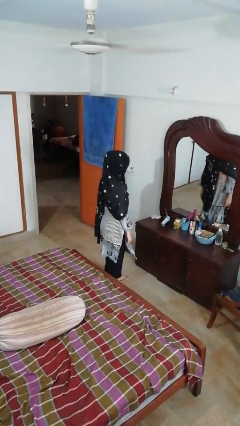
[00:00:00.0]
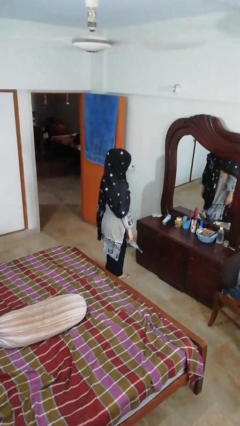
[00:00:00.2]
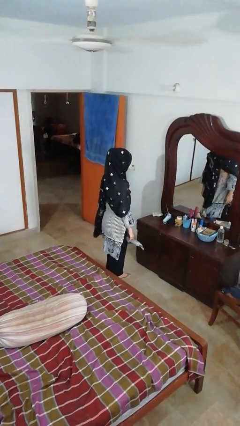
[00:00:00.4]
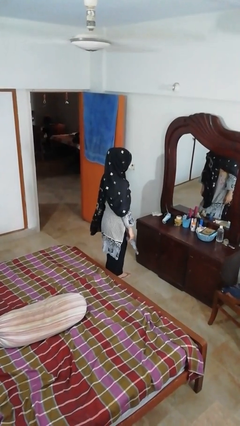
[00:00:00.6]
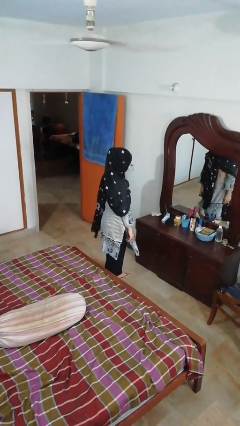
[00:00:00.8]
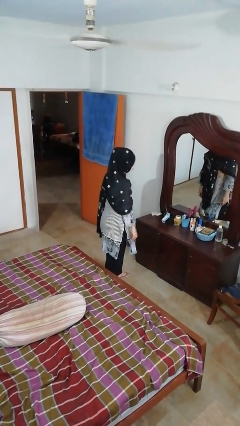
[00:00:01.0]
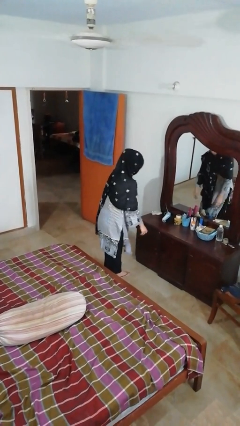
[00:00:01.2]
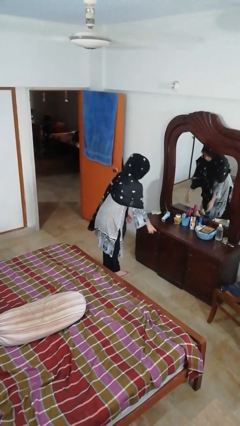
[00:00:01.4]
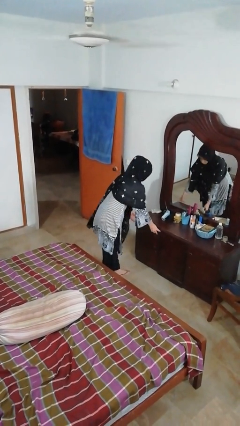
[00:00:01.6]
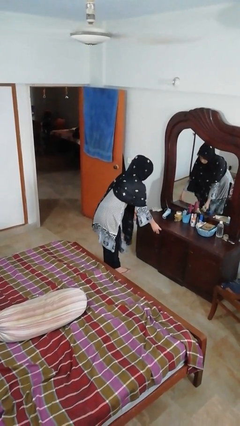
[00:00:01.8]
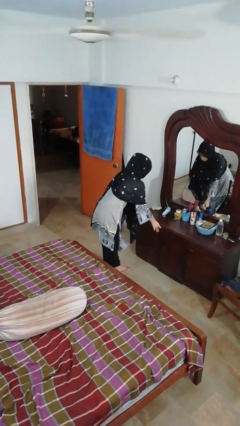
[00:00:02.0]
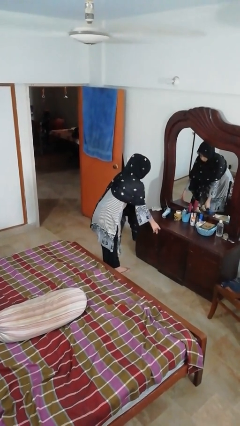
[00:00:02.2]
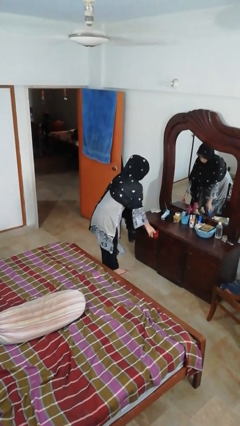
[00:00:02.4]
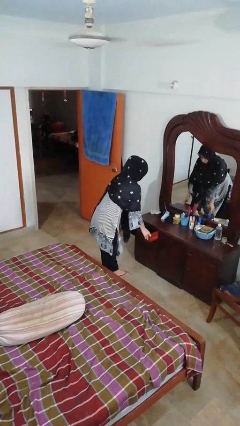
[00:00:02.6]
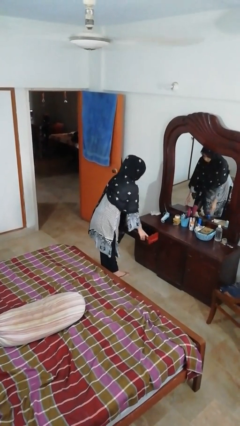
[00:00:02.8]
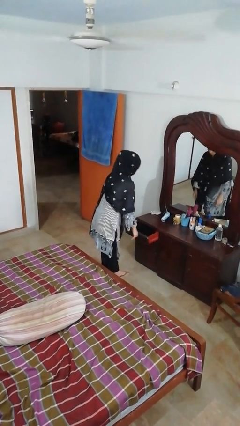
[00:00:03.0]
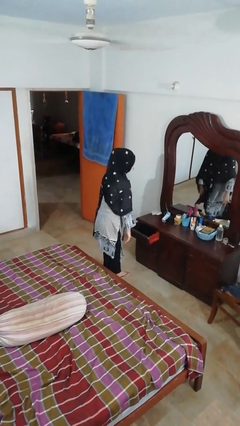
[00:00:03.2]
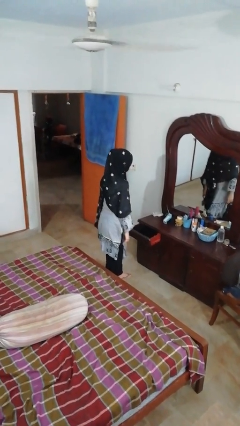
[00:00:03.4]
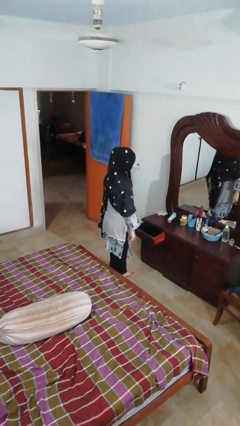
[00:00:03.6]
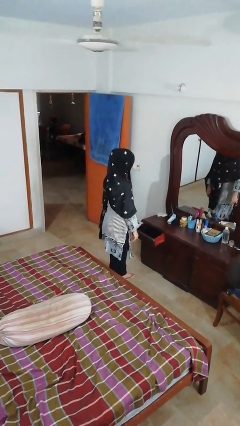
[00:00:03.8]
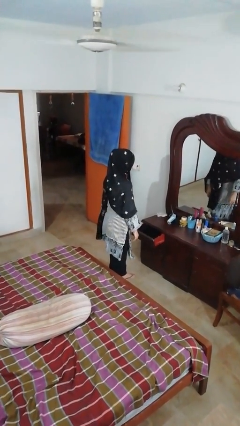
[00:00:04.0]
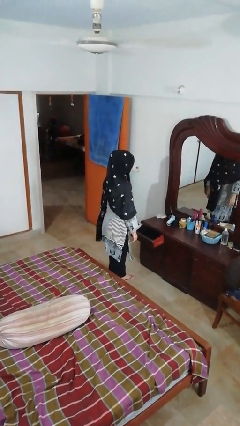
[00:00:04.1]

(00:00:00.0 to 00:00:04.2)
person opens dresser drawer

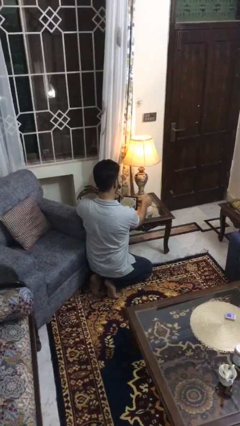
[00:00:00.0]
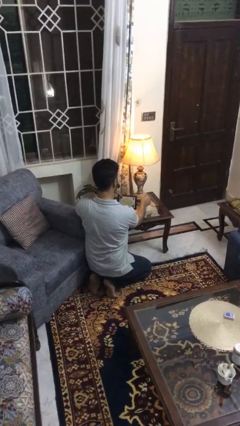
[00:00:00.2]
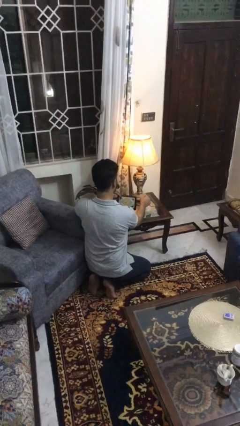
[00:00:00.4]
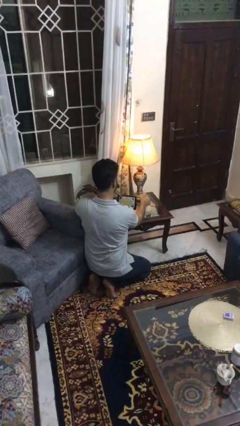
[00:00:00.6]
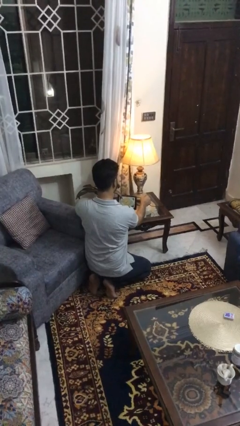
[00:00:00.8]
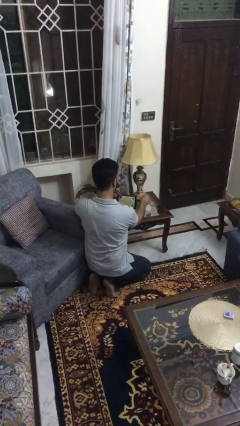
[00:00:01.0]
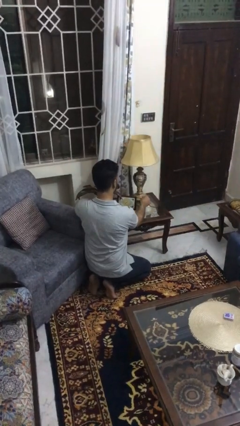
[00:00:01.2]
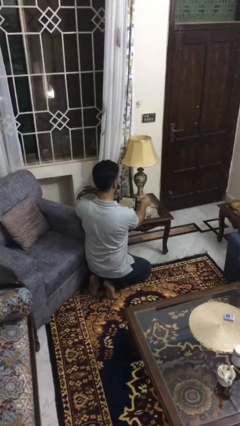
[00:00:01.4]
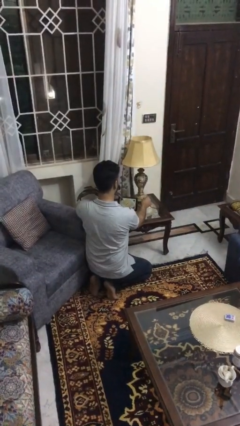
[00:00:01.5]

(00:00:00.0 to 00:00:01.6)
person turns off lamp

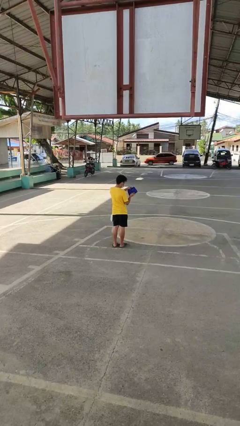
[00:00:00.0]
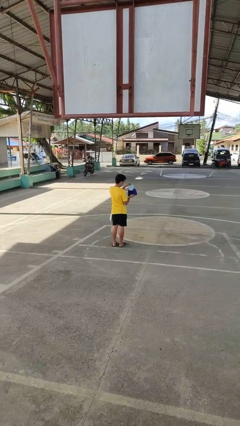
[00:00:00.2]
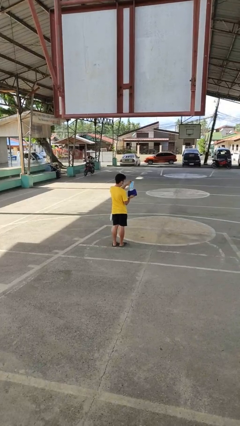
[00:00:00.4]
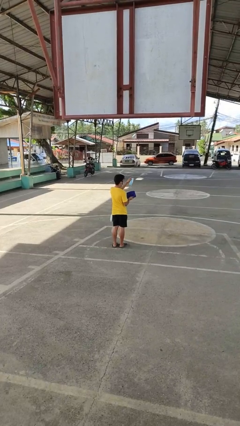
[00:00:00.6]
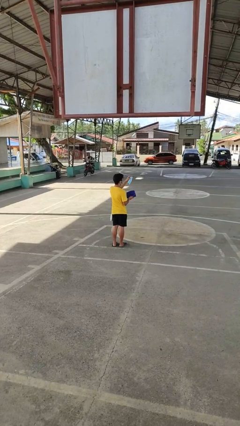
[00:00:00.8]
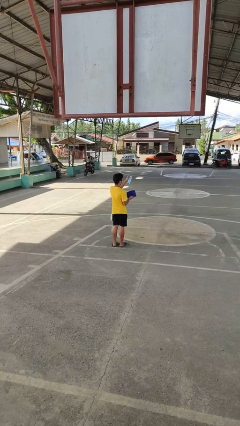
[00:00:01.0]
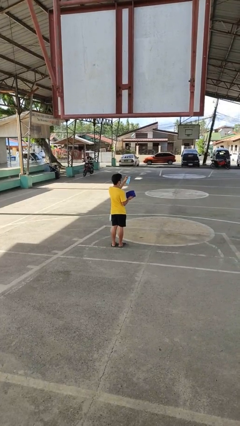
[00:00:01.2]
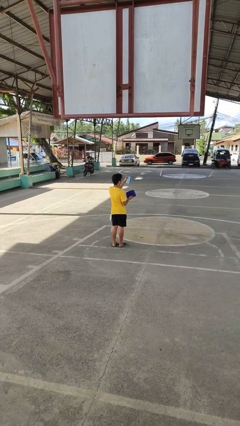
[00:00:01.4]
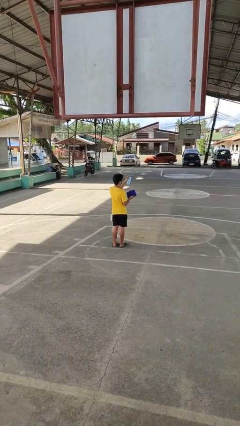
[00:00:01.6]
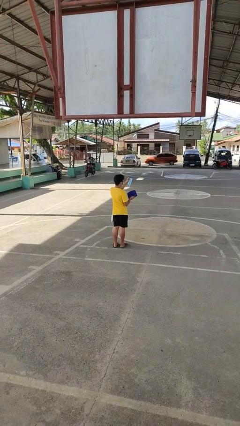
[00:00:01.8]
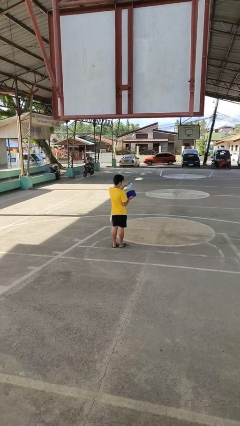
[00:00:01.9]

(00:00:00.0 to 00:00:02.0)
person takes object from purse

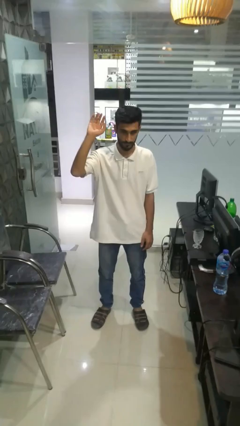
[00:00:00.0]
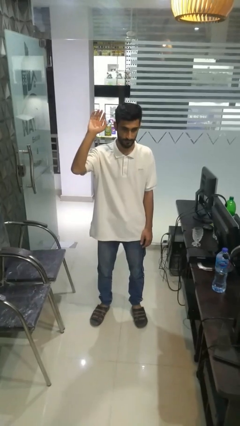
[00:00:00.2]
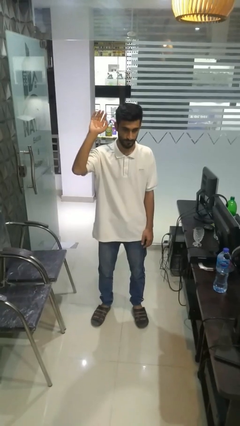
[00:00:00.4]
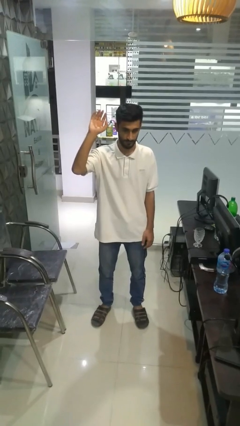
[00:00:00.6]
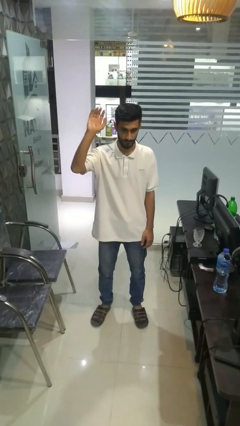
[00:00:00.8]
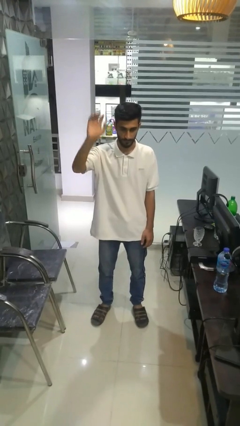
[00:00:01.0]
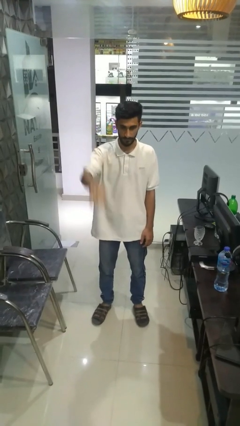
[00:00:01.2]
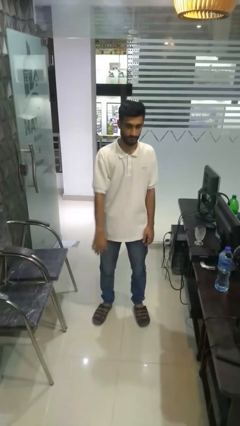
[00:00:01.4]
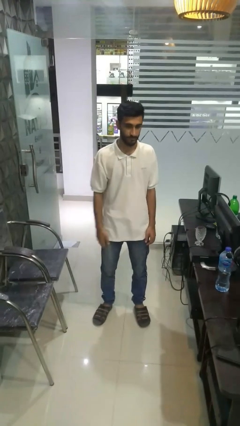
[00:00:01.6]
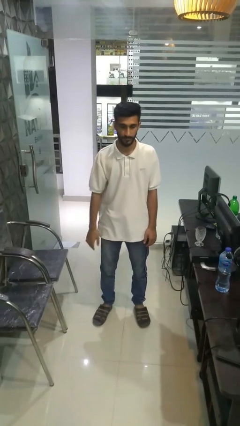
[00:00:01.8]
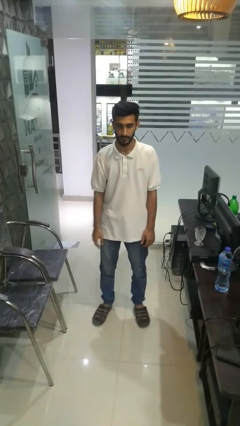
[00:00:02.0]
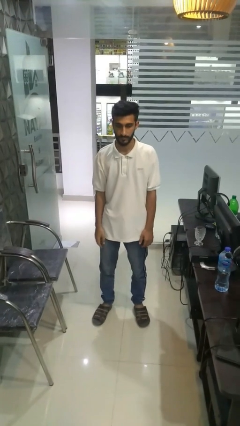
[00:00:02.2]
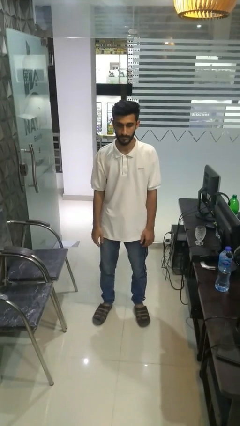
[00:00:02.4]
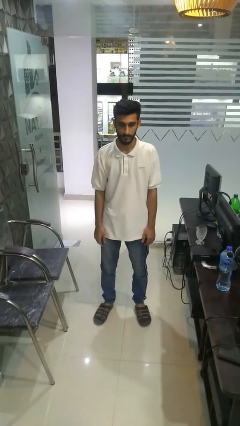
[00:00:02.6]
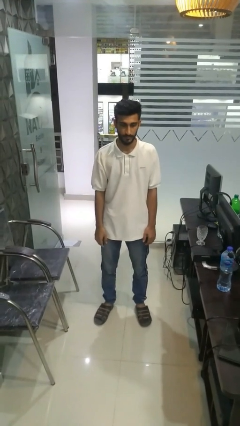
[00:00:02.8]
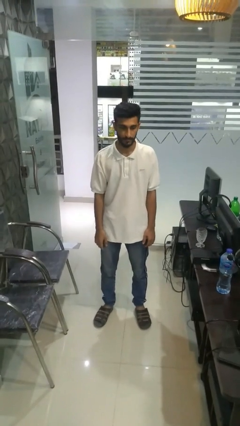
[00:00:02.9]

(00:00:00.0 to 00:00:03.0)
person gestures lower hand

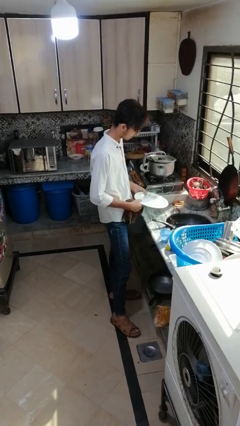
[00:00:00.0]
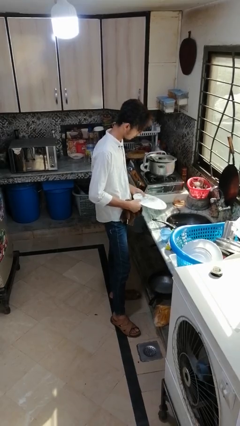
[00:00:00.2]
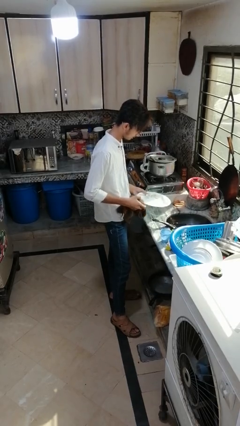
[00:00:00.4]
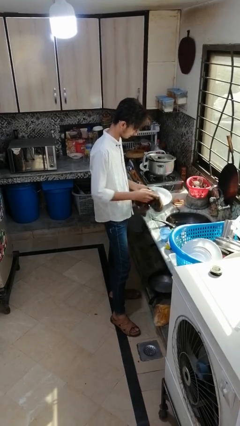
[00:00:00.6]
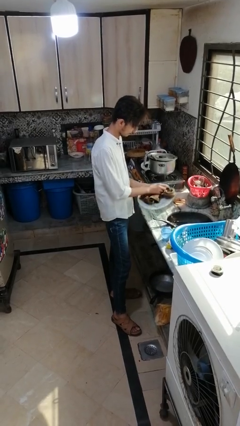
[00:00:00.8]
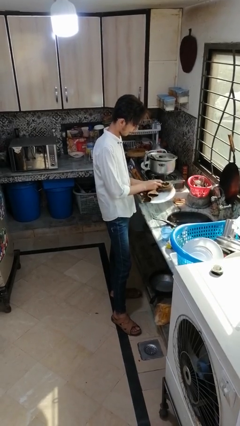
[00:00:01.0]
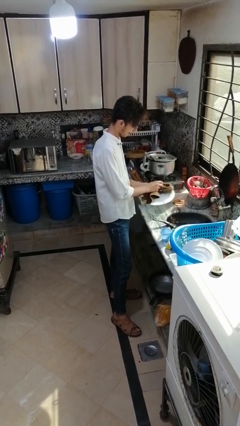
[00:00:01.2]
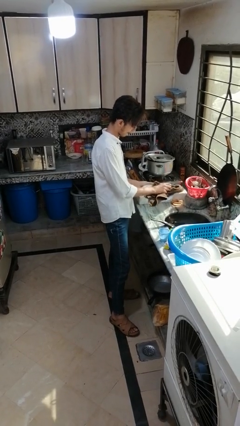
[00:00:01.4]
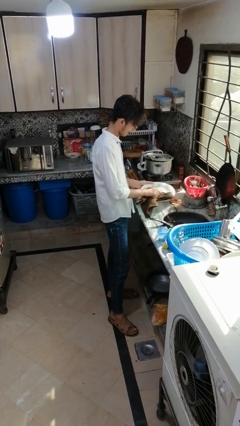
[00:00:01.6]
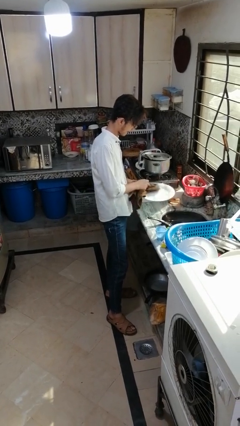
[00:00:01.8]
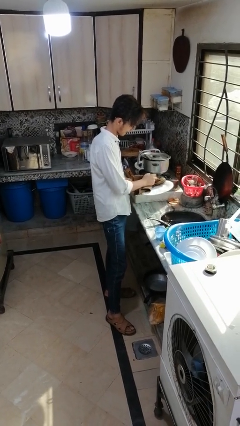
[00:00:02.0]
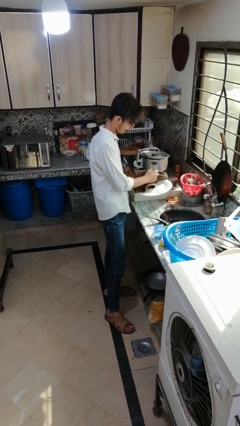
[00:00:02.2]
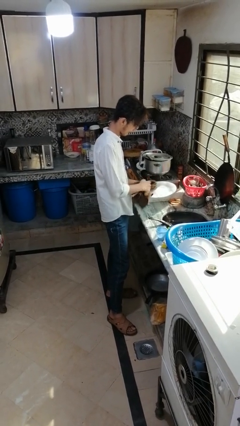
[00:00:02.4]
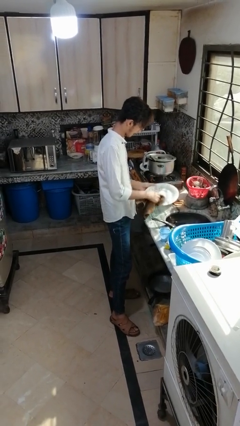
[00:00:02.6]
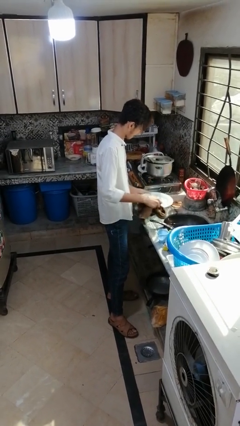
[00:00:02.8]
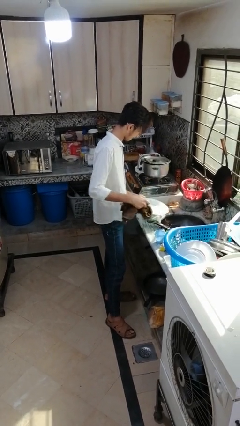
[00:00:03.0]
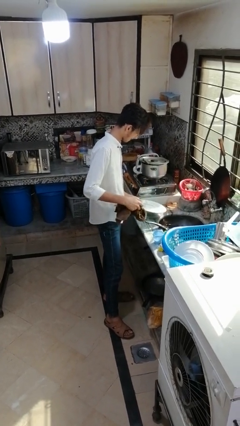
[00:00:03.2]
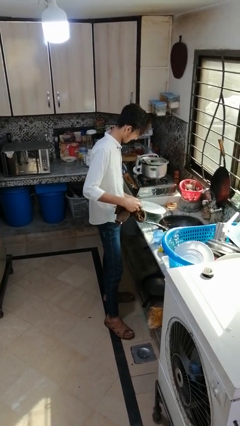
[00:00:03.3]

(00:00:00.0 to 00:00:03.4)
person dries dish

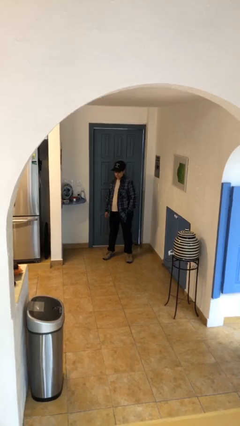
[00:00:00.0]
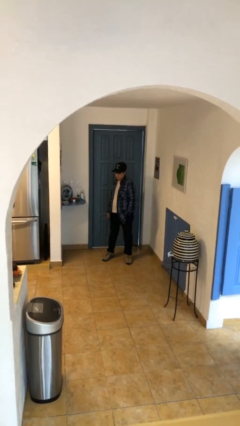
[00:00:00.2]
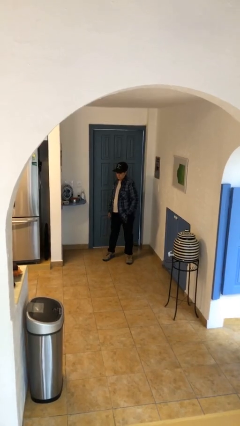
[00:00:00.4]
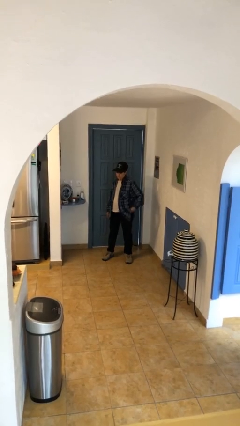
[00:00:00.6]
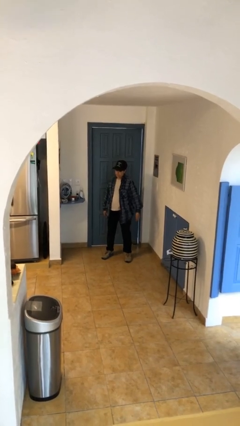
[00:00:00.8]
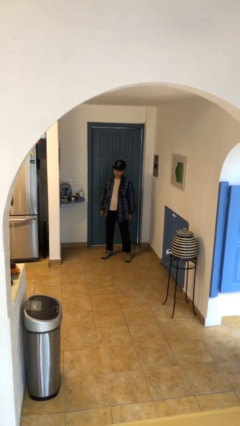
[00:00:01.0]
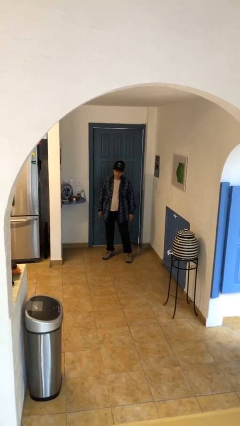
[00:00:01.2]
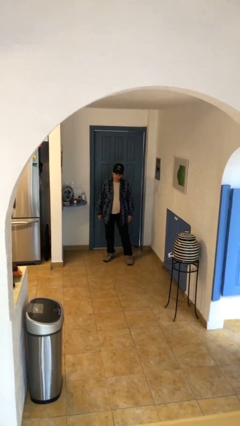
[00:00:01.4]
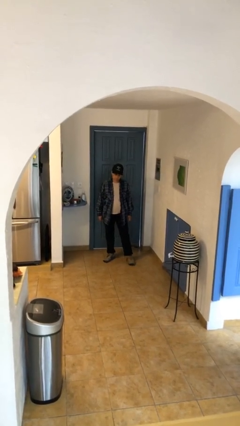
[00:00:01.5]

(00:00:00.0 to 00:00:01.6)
person puts hands in back pockets

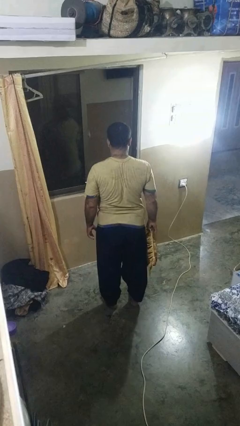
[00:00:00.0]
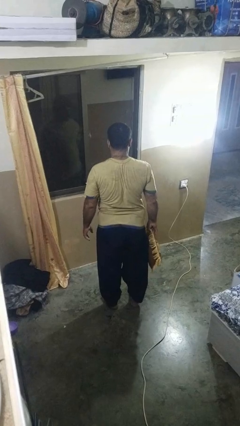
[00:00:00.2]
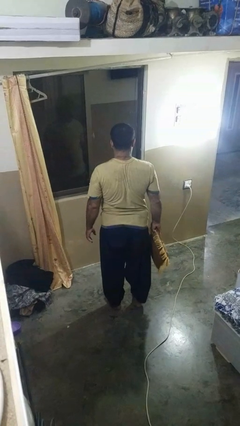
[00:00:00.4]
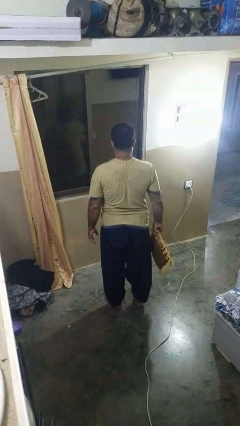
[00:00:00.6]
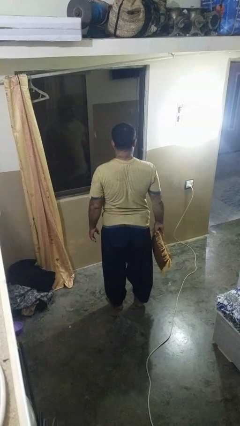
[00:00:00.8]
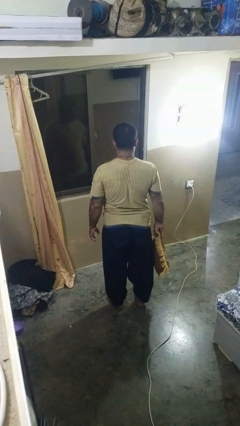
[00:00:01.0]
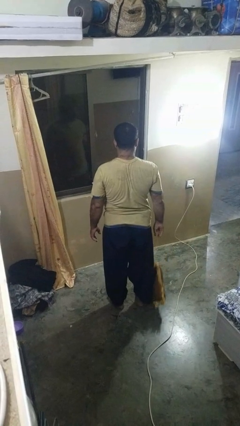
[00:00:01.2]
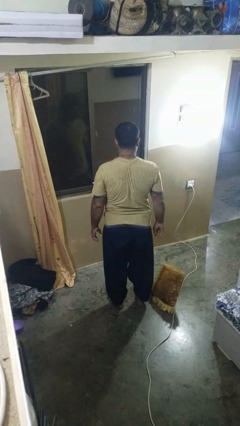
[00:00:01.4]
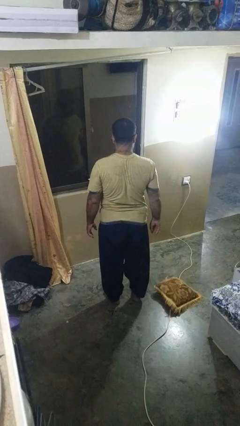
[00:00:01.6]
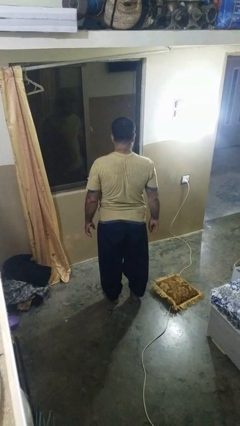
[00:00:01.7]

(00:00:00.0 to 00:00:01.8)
person drops object
